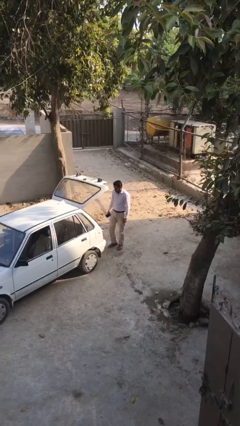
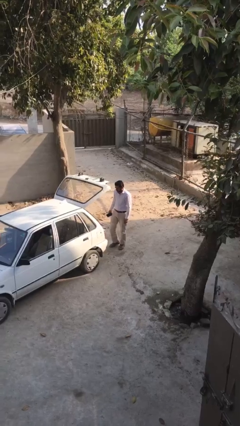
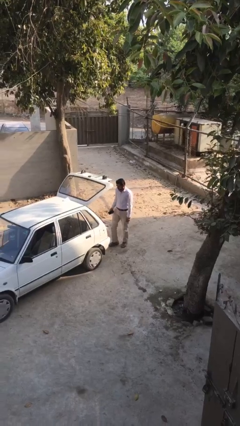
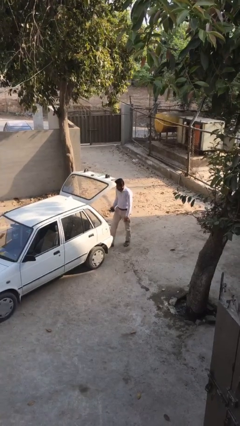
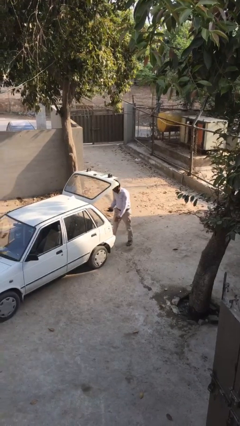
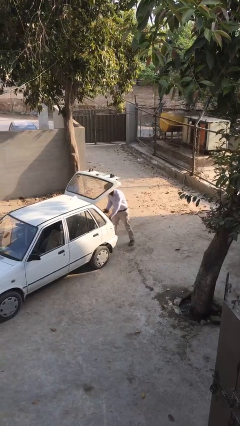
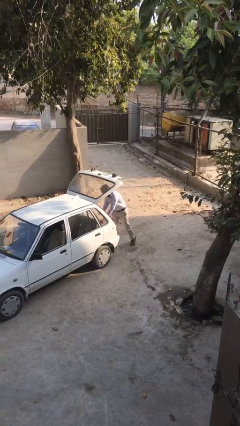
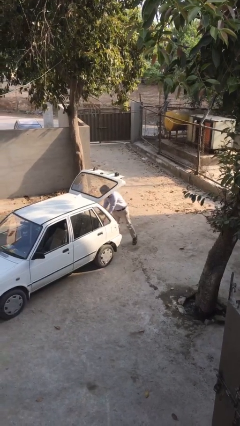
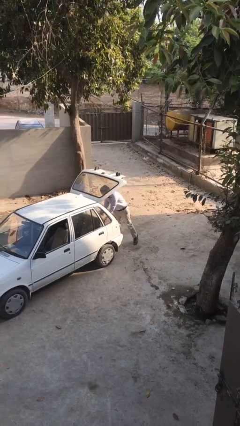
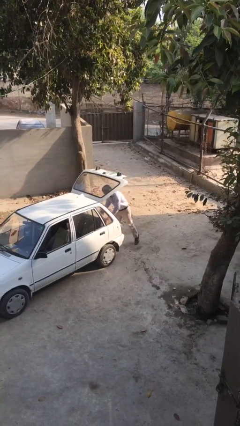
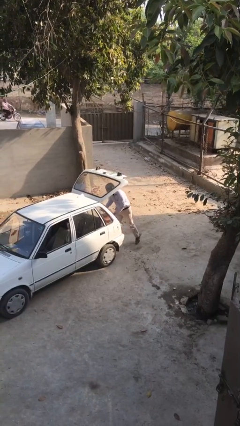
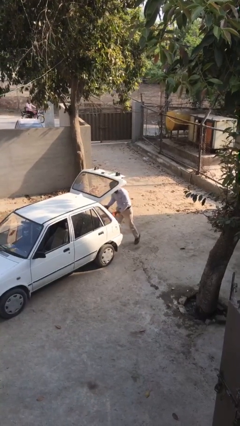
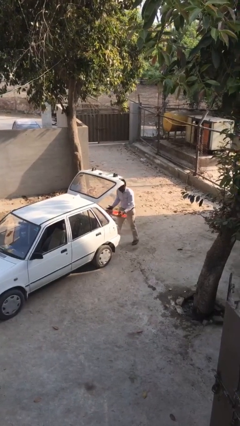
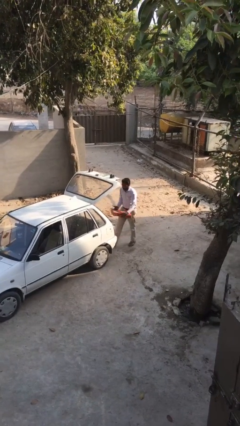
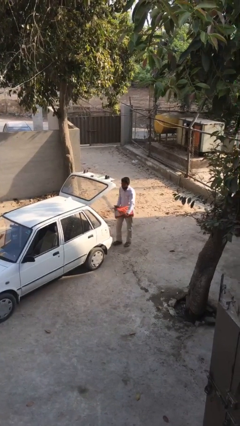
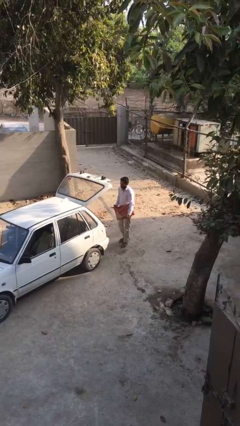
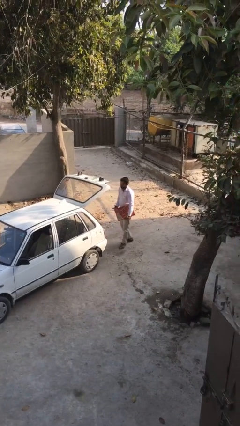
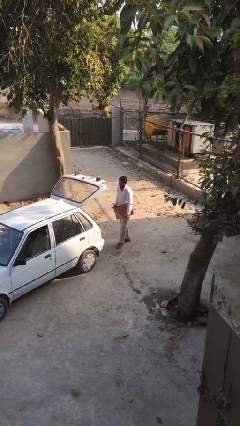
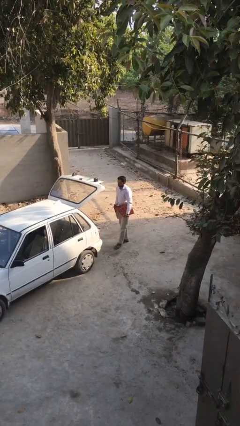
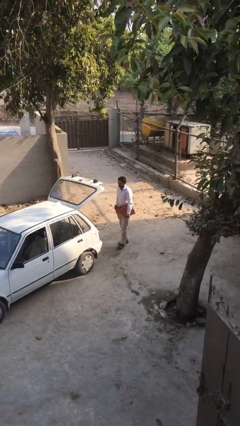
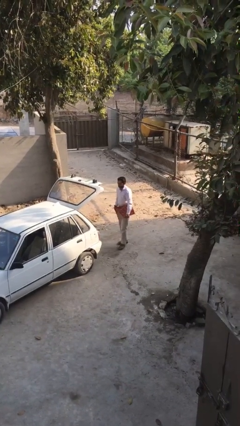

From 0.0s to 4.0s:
person unloads car

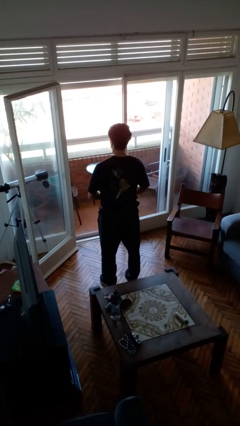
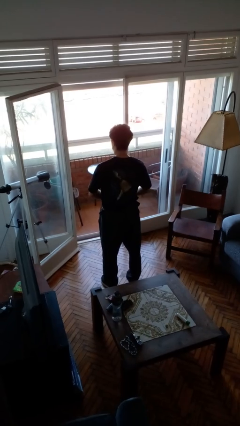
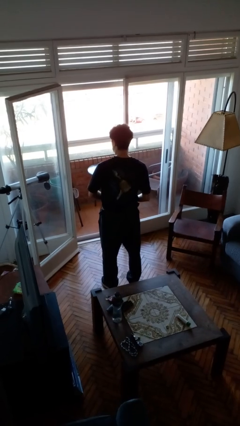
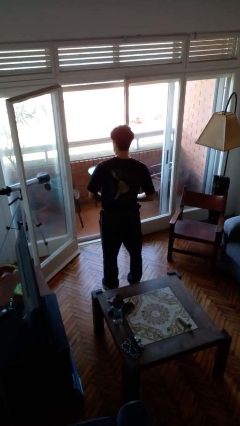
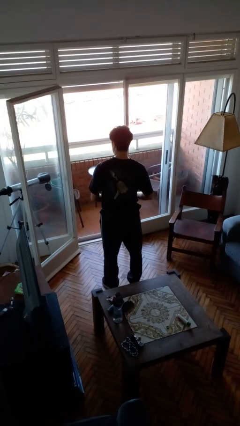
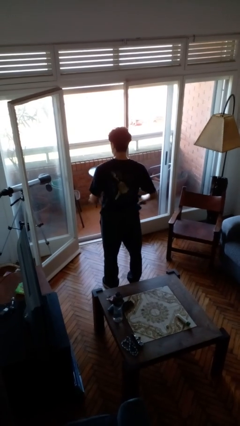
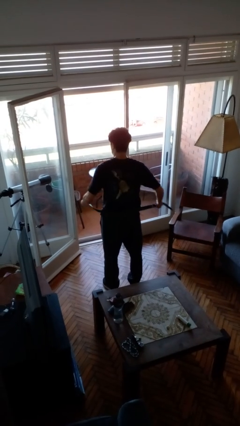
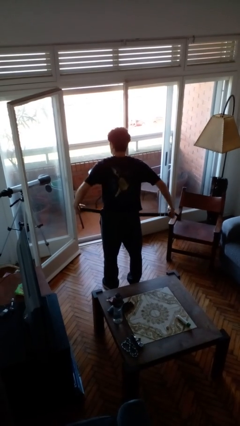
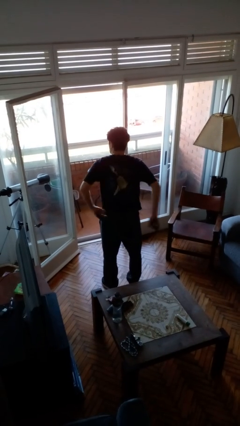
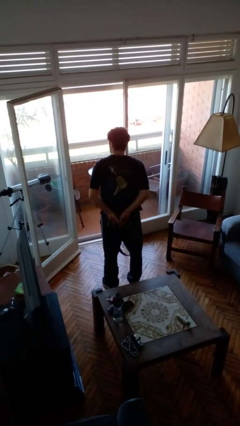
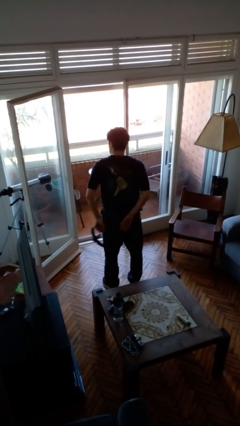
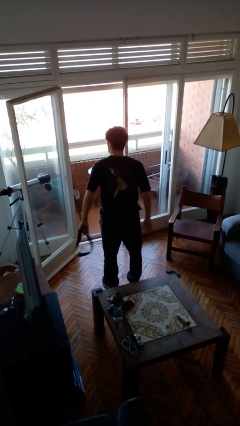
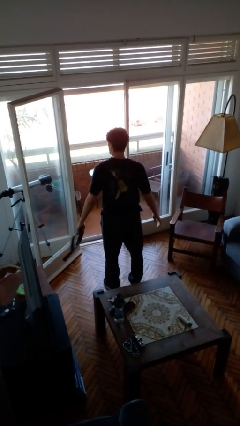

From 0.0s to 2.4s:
person takes off belt

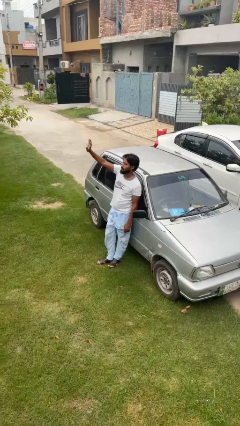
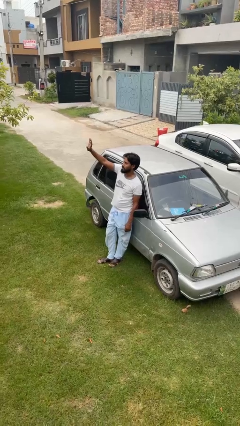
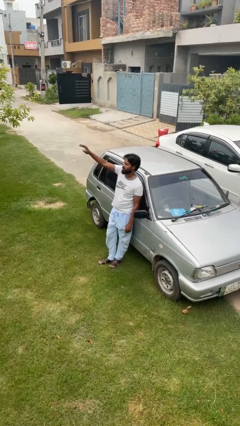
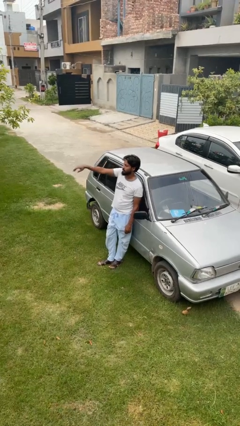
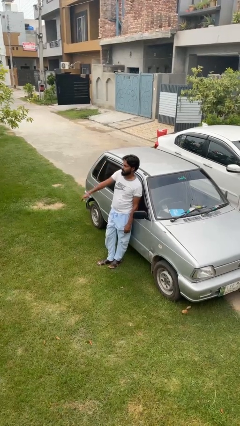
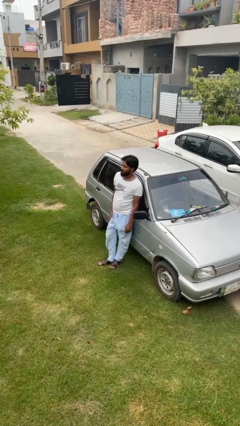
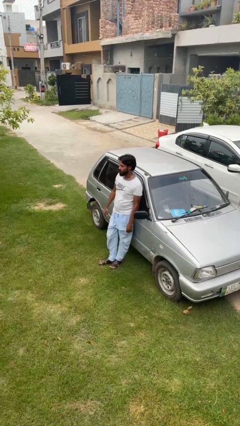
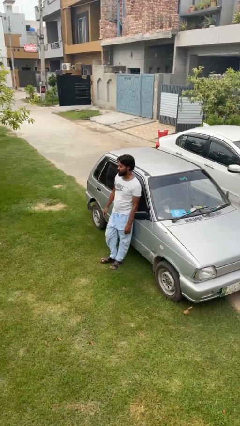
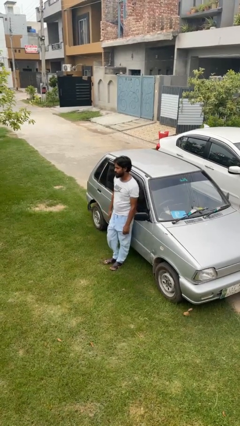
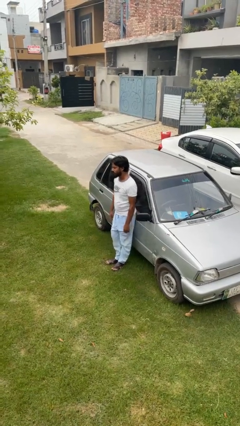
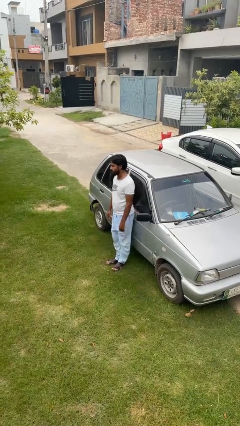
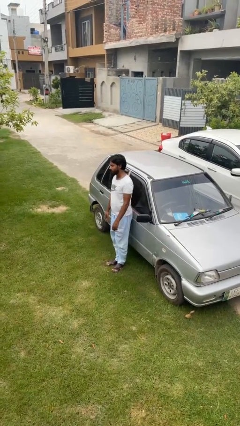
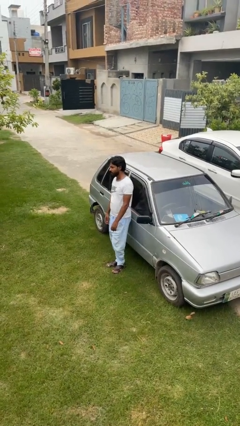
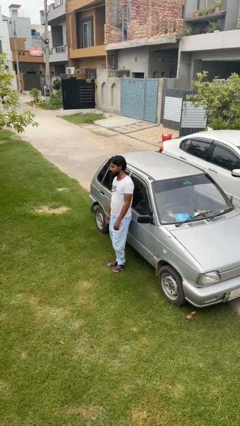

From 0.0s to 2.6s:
person gestures lower hand

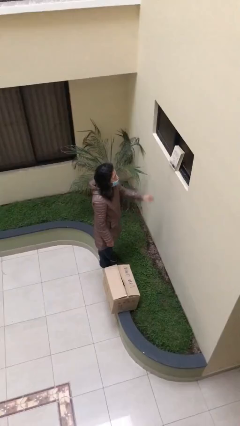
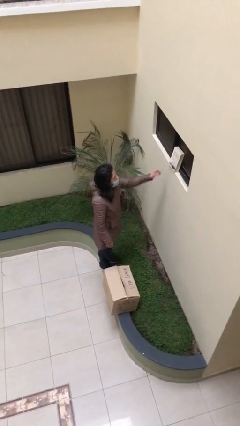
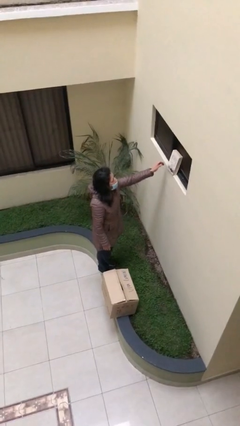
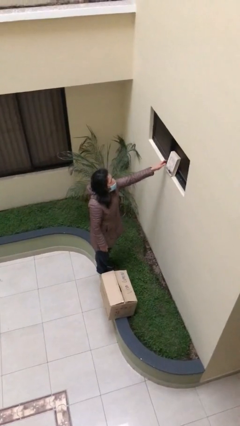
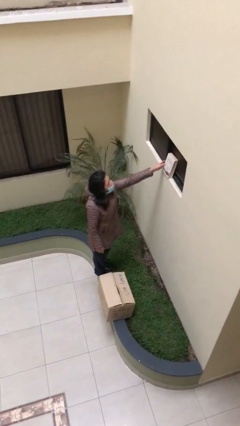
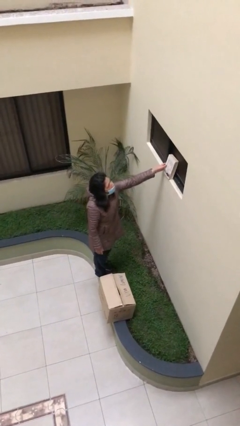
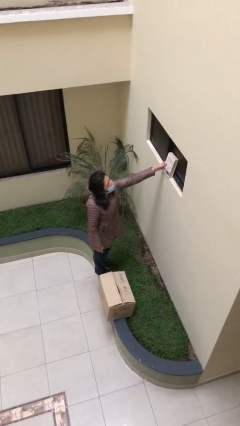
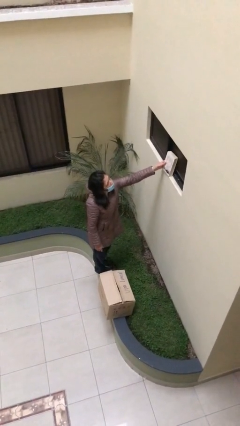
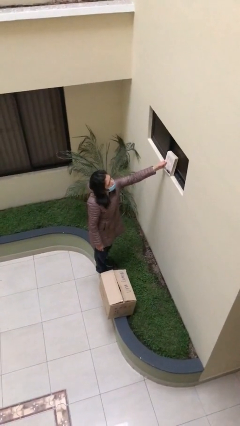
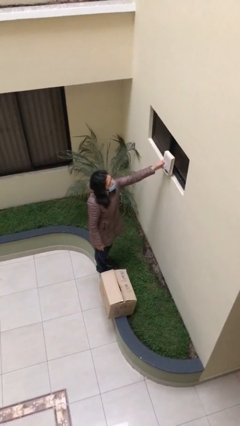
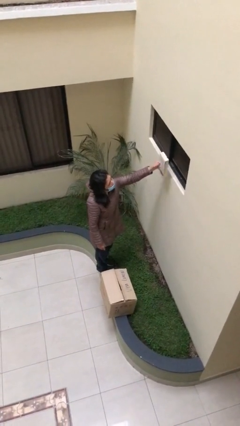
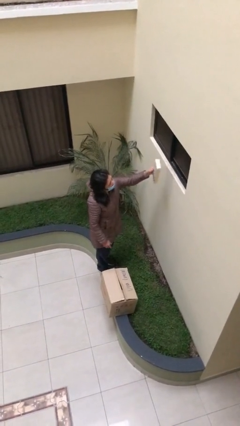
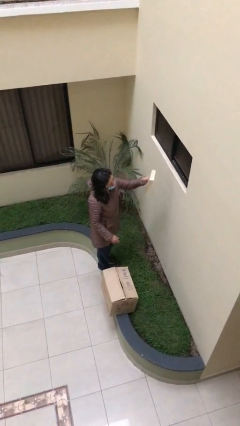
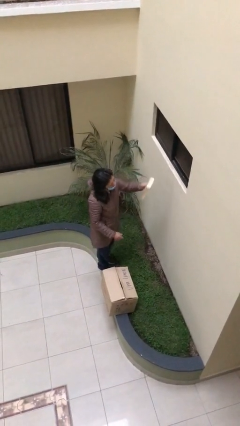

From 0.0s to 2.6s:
person picks up object from shelf

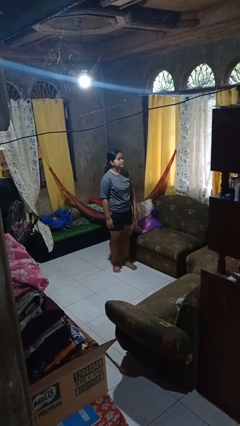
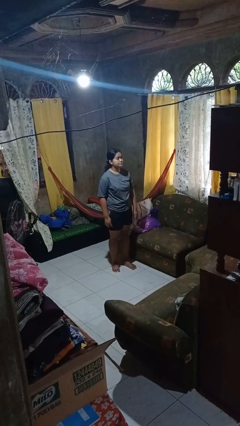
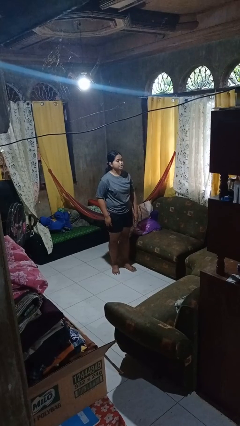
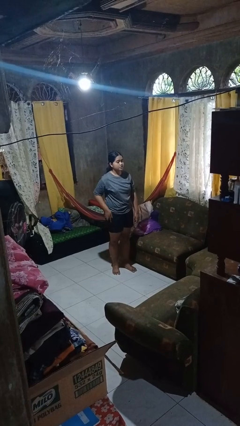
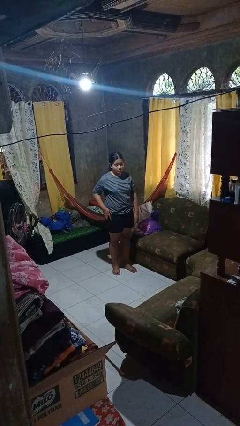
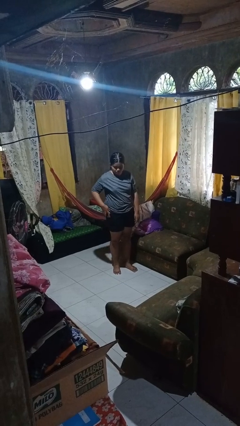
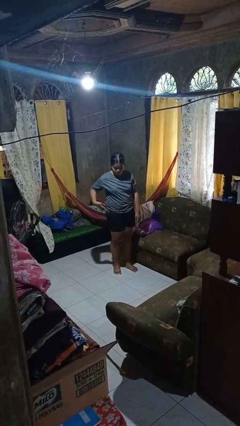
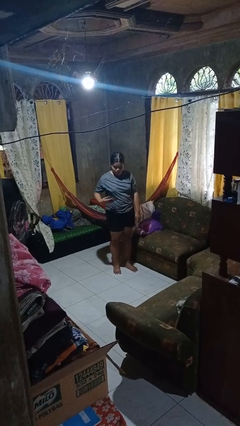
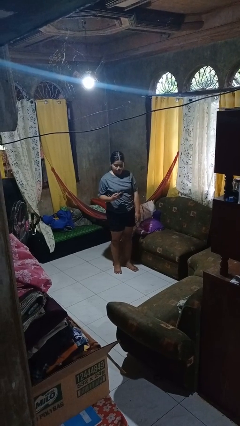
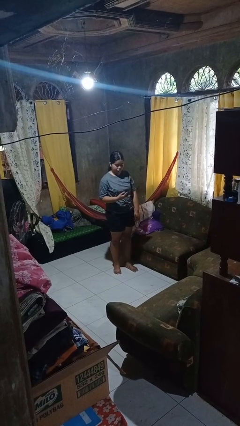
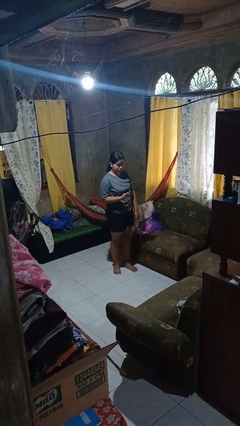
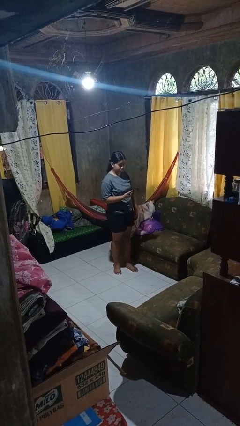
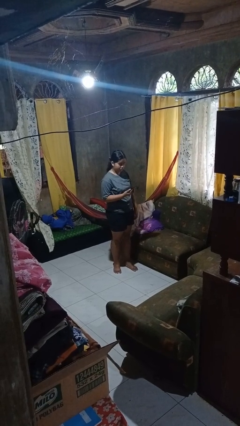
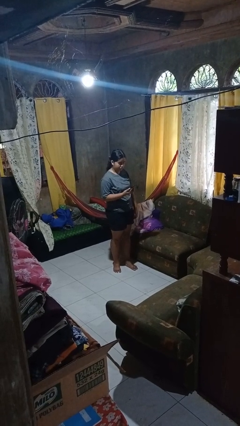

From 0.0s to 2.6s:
person takes phone from pocket

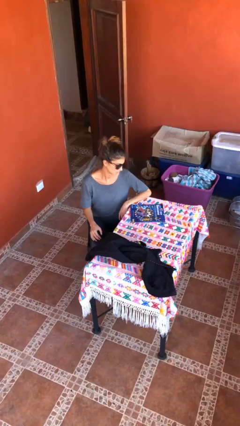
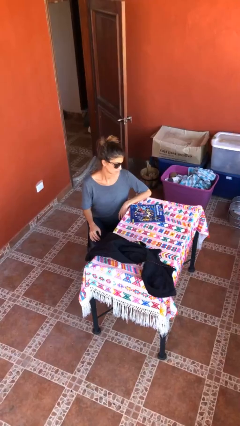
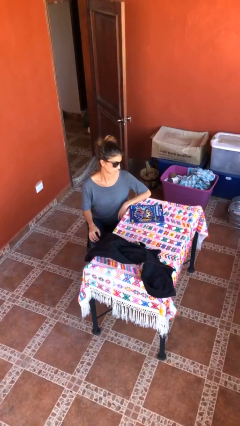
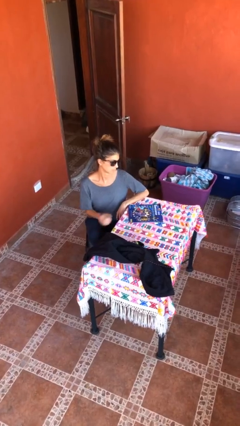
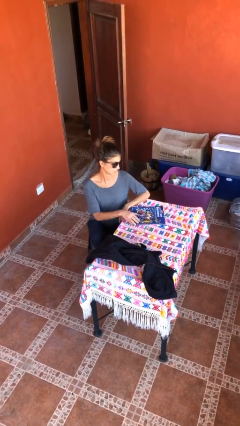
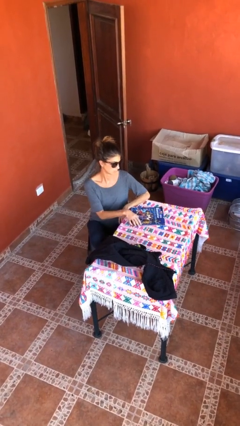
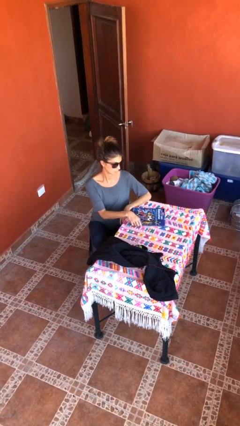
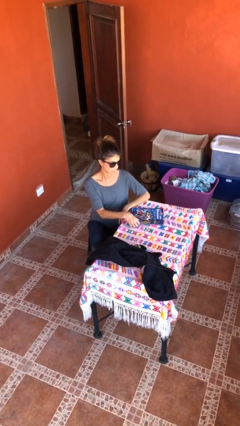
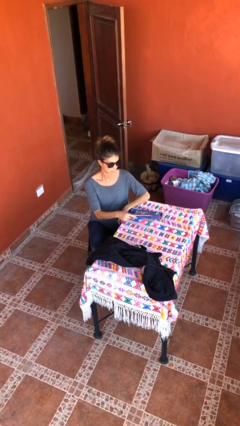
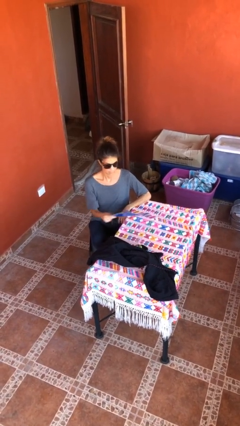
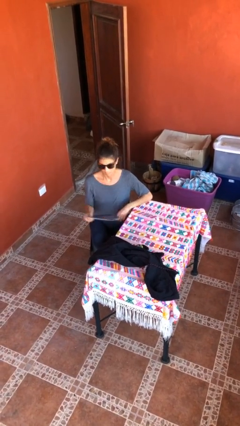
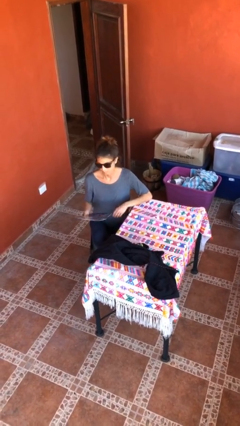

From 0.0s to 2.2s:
person picks up object from table

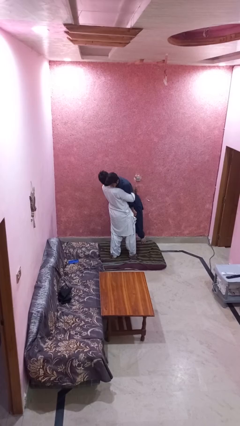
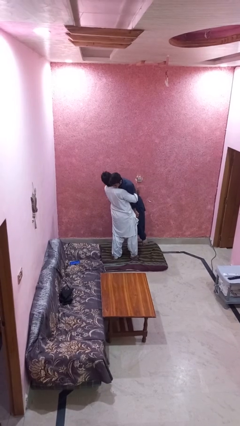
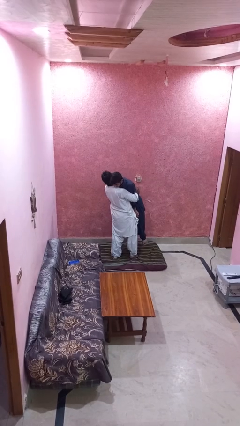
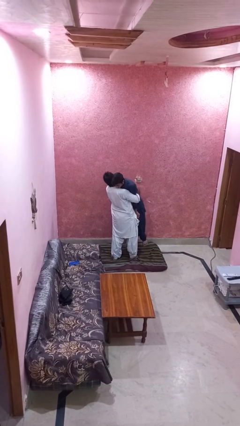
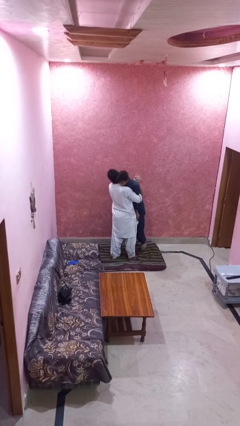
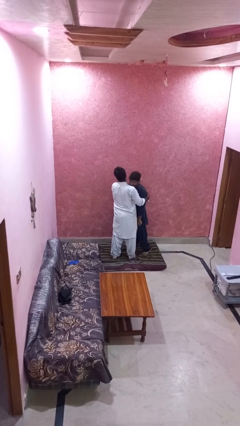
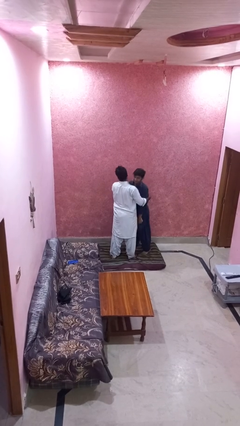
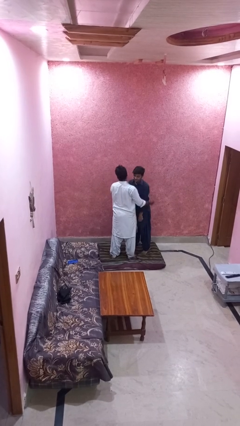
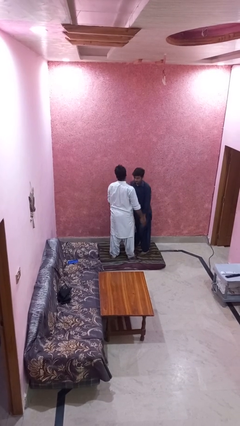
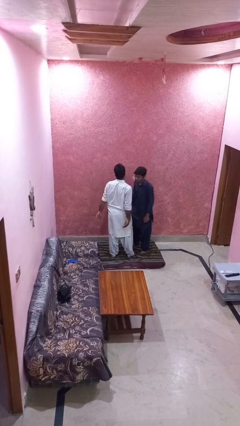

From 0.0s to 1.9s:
person puts down person
